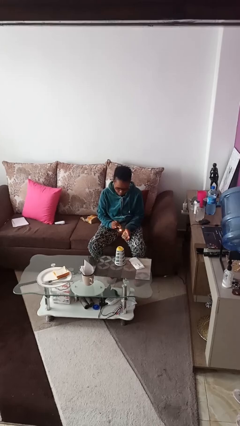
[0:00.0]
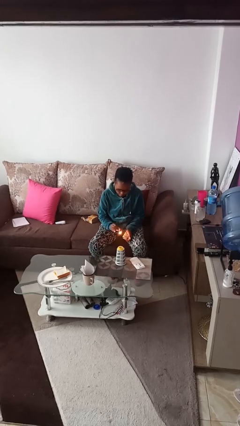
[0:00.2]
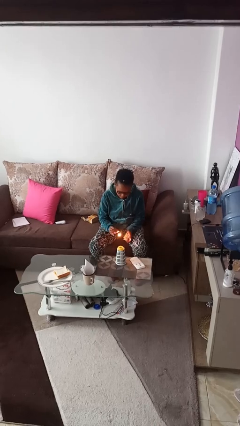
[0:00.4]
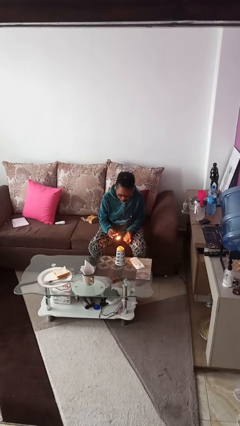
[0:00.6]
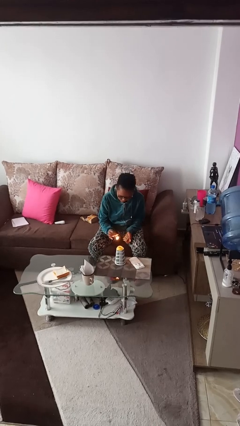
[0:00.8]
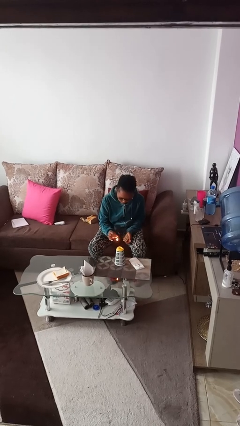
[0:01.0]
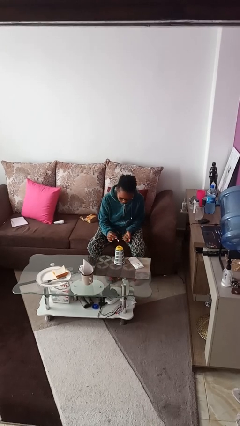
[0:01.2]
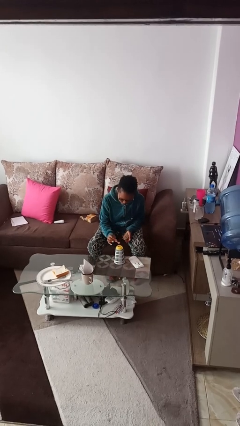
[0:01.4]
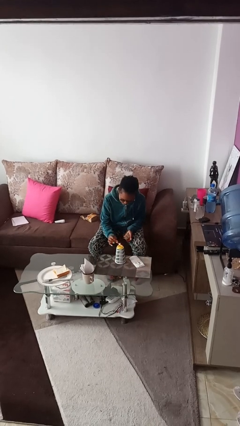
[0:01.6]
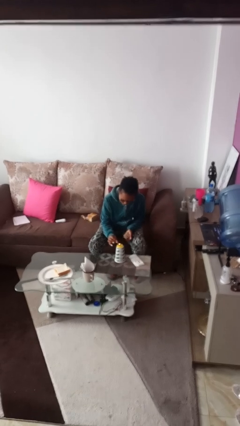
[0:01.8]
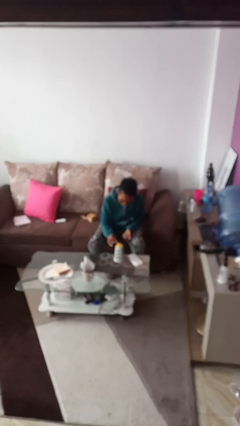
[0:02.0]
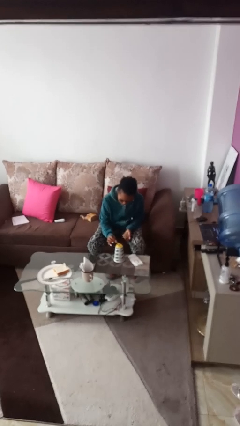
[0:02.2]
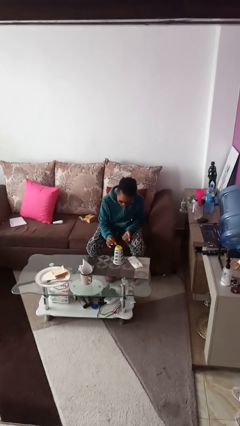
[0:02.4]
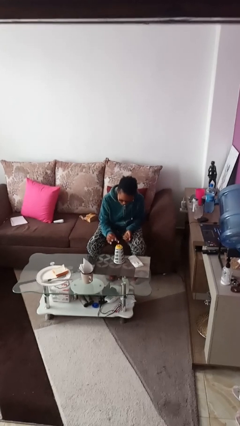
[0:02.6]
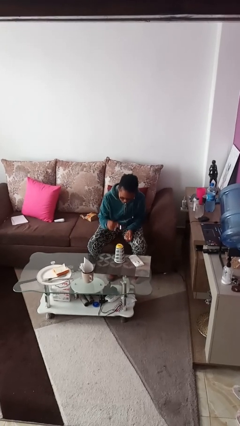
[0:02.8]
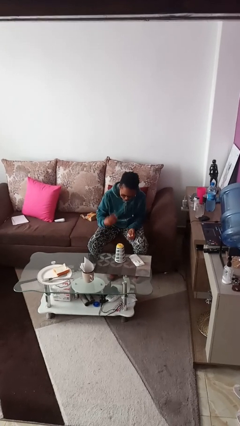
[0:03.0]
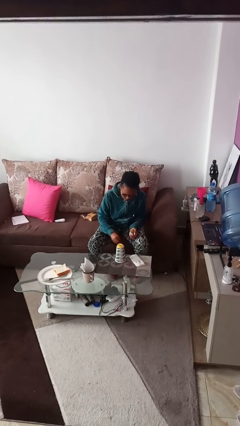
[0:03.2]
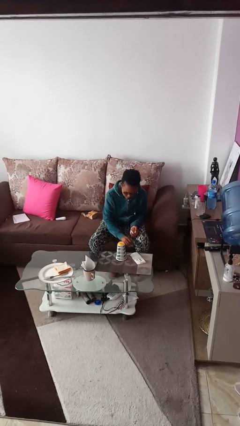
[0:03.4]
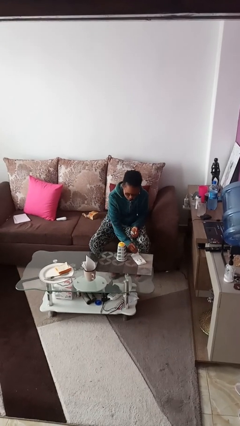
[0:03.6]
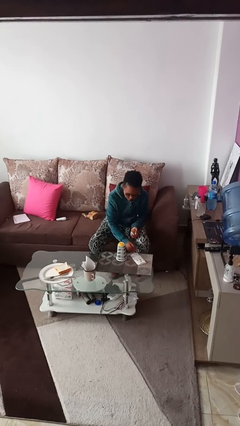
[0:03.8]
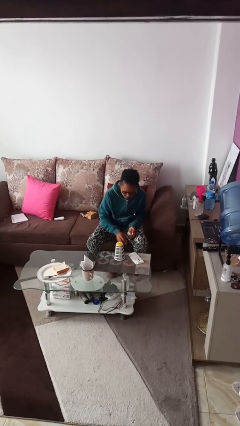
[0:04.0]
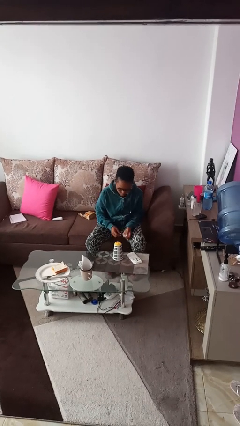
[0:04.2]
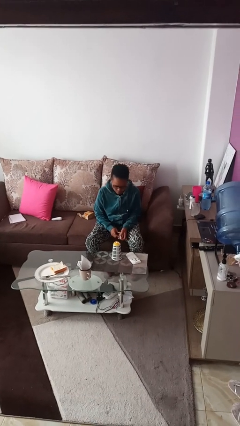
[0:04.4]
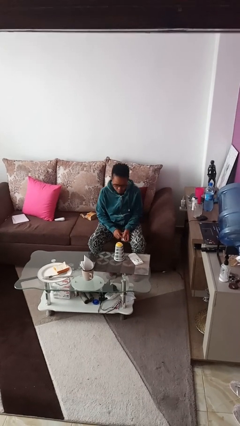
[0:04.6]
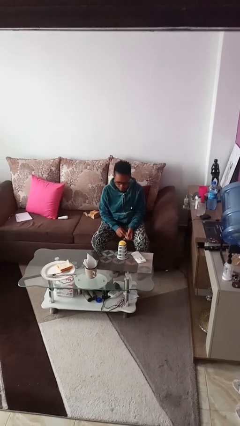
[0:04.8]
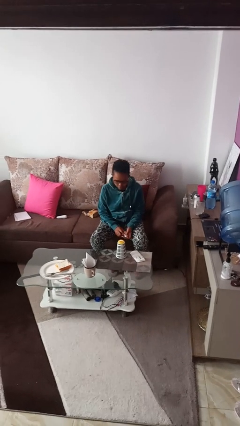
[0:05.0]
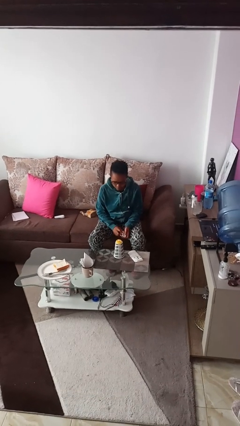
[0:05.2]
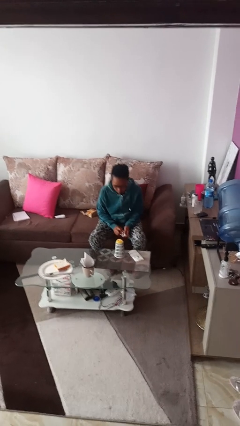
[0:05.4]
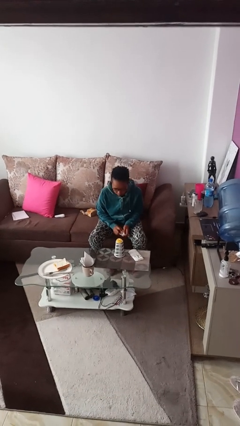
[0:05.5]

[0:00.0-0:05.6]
person lights candle

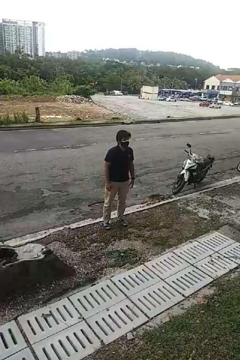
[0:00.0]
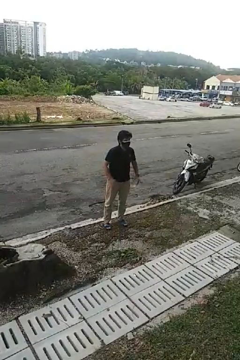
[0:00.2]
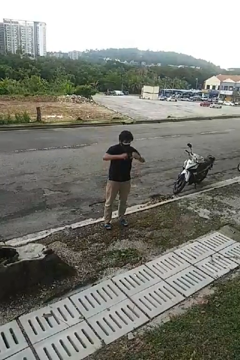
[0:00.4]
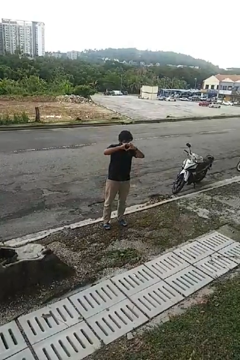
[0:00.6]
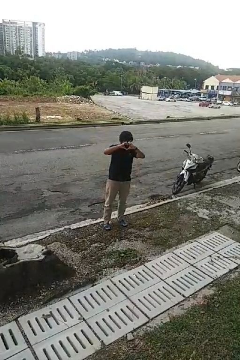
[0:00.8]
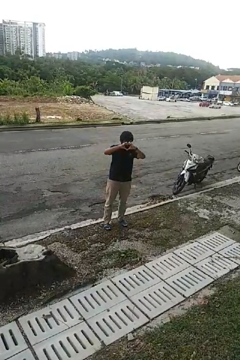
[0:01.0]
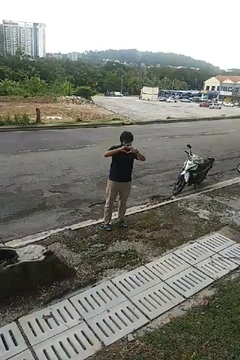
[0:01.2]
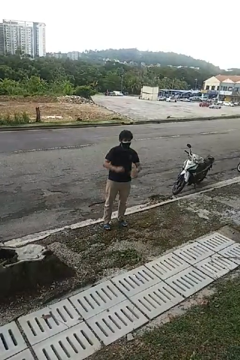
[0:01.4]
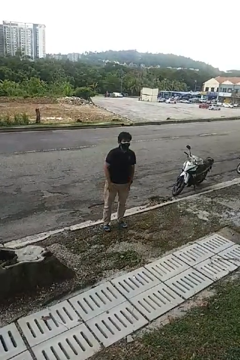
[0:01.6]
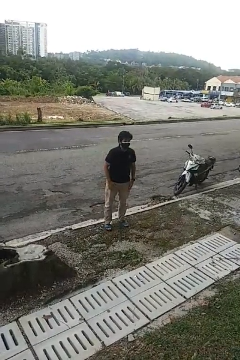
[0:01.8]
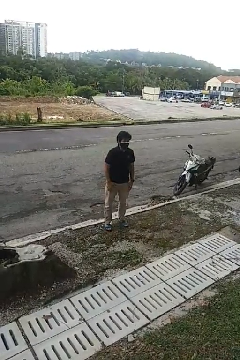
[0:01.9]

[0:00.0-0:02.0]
person gestures heart

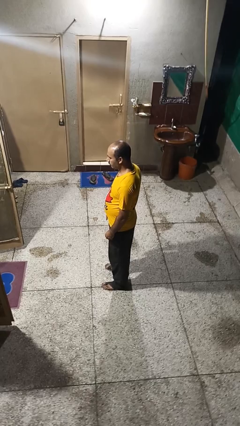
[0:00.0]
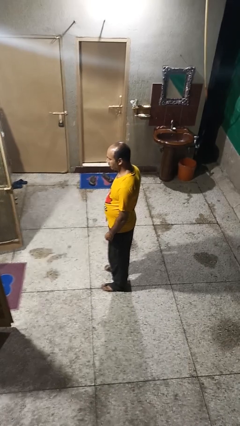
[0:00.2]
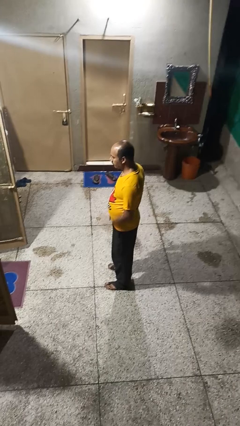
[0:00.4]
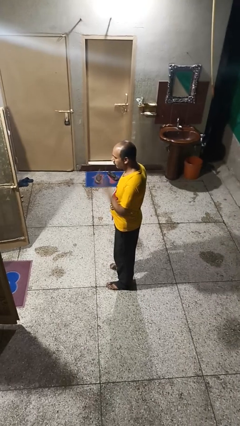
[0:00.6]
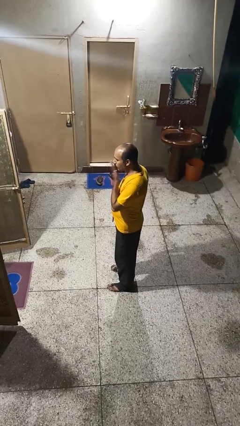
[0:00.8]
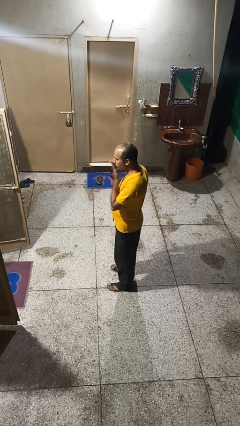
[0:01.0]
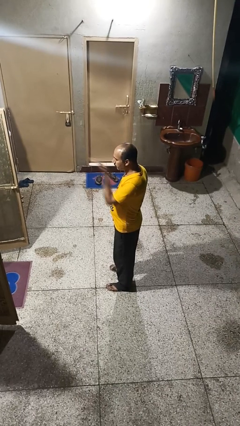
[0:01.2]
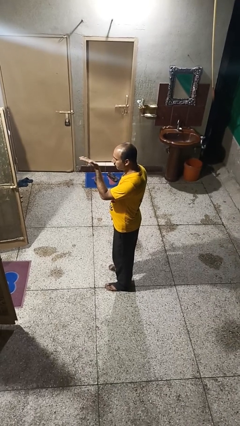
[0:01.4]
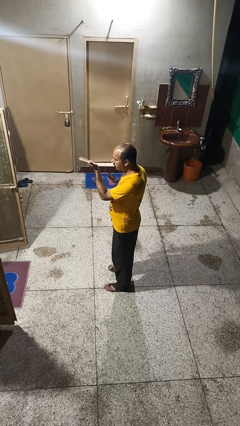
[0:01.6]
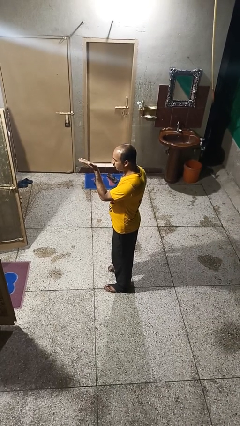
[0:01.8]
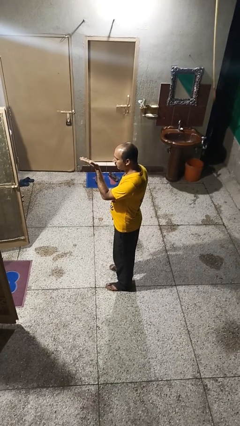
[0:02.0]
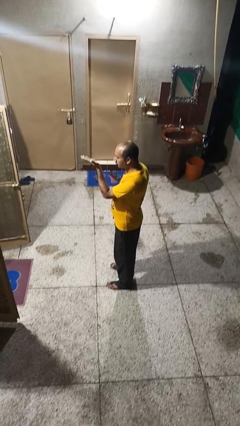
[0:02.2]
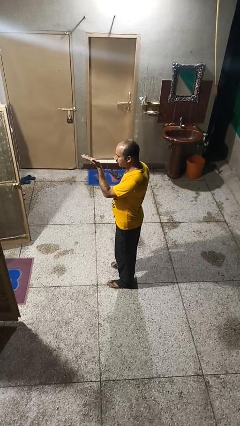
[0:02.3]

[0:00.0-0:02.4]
person gestures blow kiss

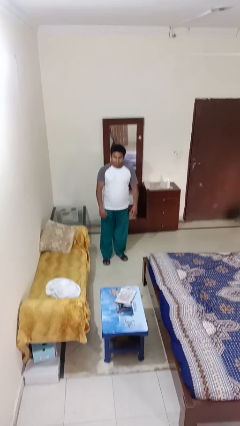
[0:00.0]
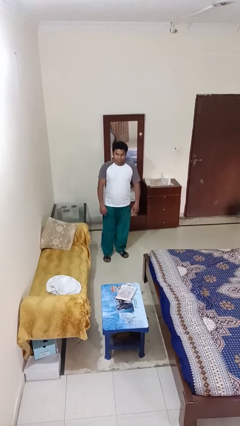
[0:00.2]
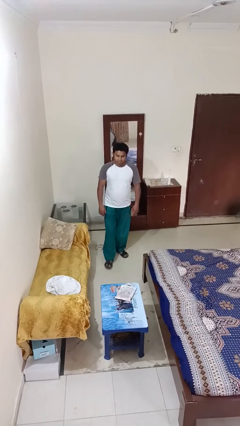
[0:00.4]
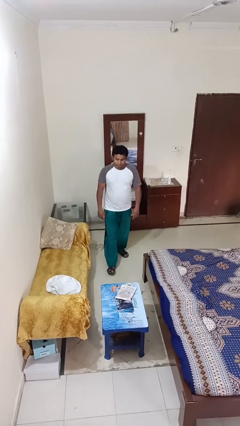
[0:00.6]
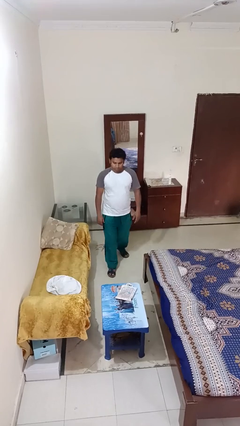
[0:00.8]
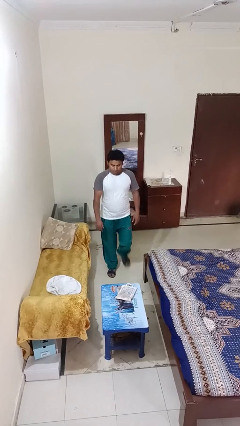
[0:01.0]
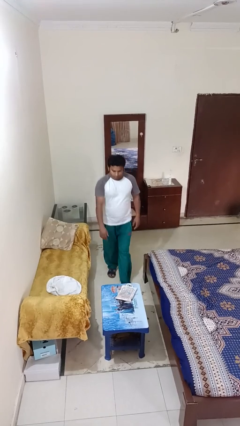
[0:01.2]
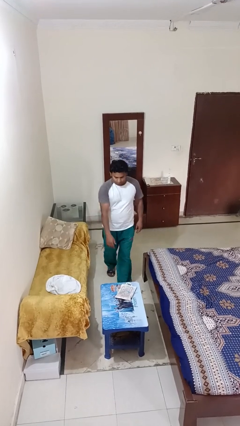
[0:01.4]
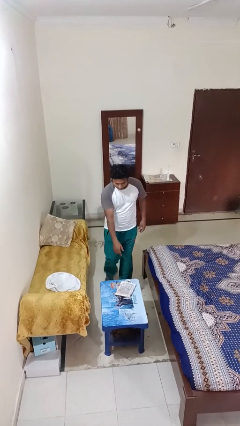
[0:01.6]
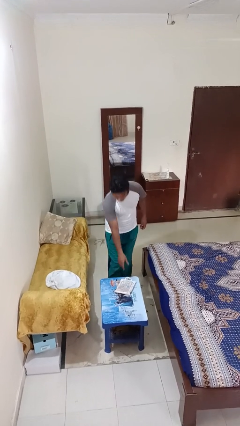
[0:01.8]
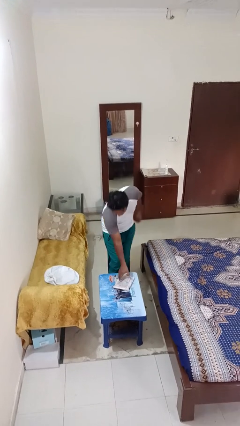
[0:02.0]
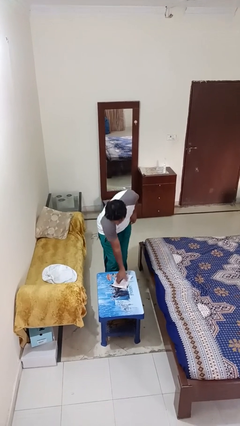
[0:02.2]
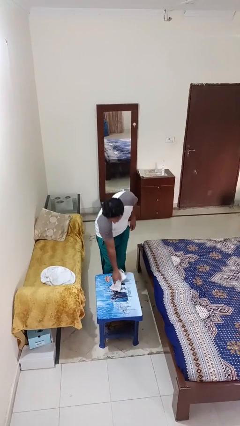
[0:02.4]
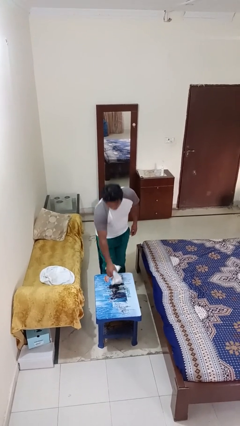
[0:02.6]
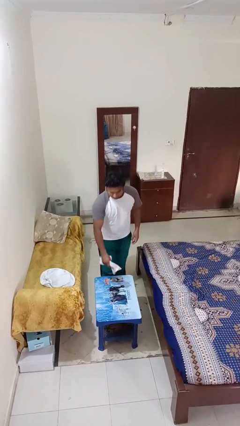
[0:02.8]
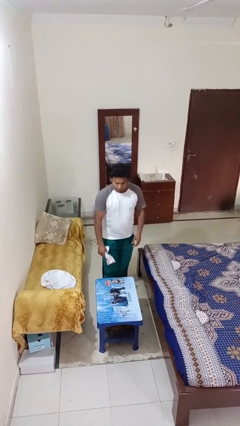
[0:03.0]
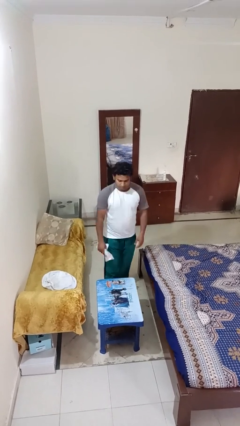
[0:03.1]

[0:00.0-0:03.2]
person picks up object from table

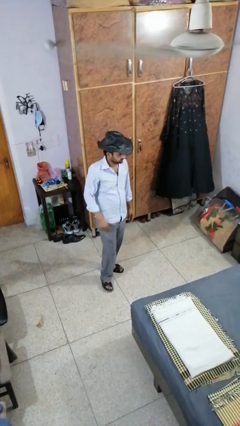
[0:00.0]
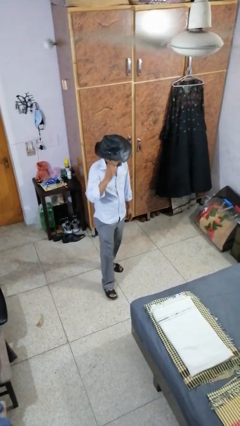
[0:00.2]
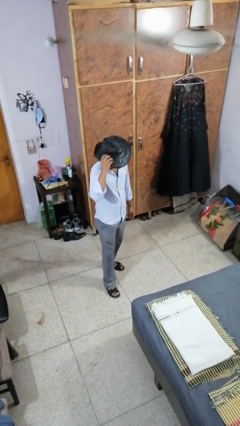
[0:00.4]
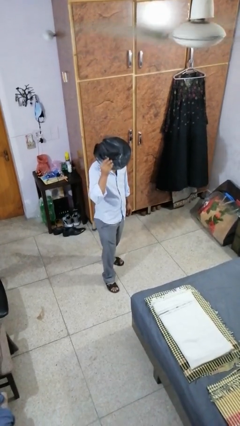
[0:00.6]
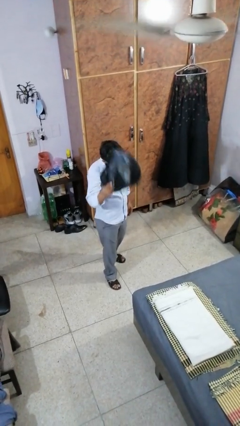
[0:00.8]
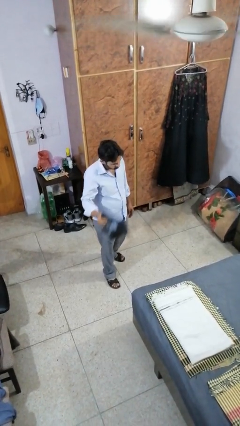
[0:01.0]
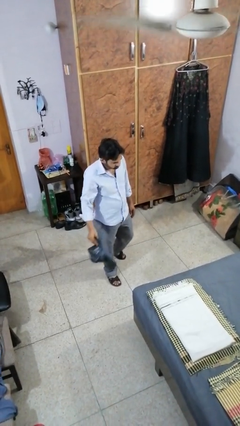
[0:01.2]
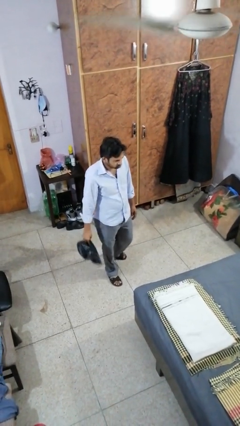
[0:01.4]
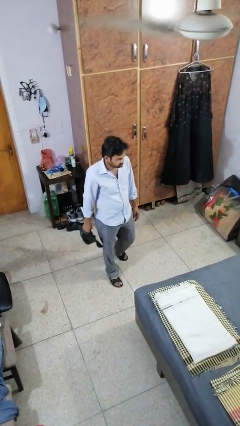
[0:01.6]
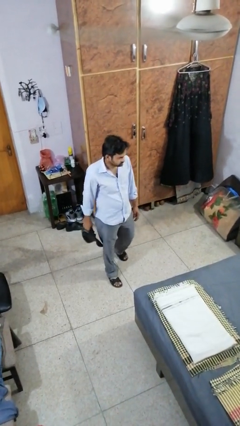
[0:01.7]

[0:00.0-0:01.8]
person takes off hat

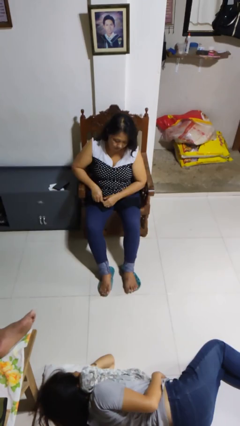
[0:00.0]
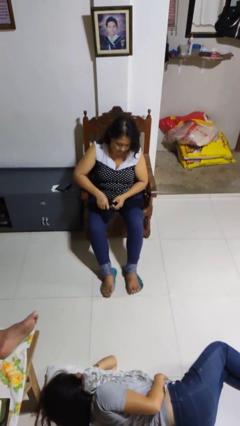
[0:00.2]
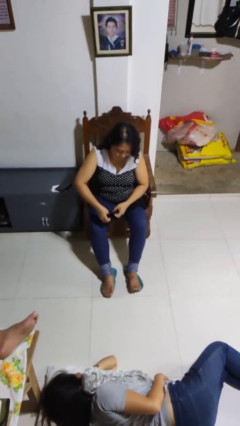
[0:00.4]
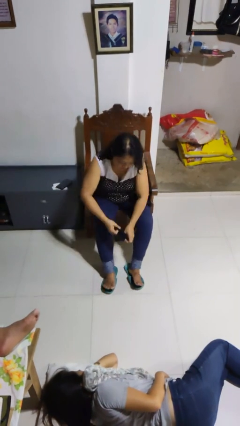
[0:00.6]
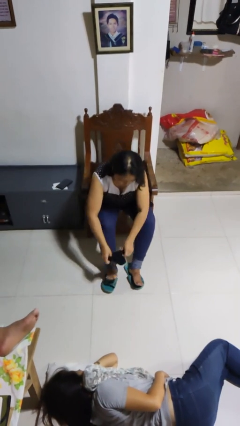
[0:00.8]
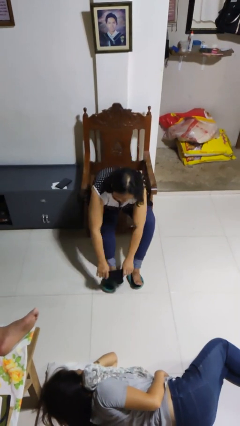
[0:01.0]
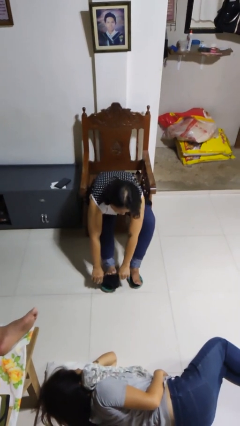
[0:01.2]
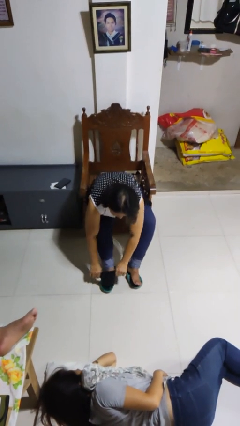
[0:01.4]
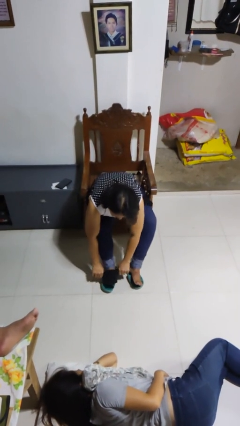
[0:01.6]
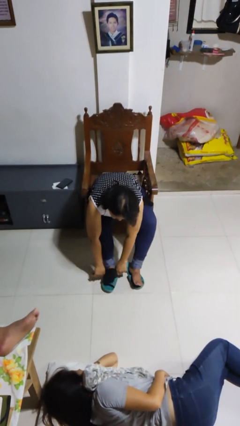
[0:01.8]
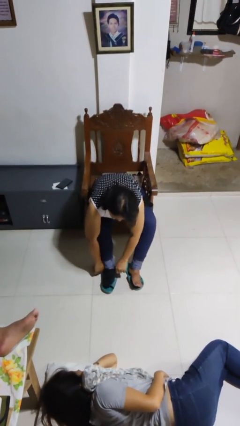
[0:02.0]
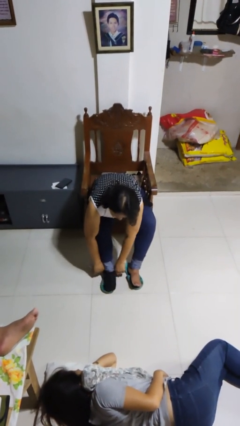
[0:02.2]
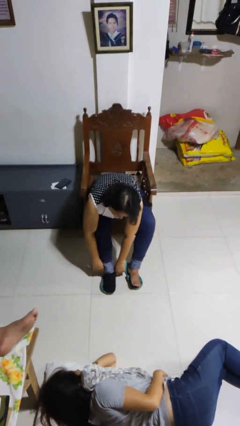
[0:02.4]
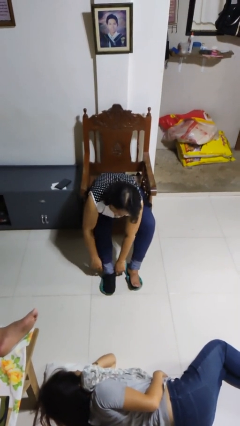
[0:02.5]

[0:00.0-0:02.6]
person puts on socks
